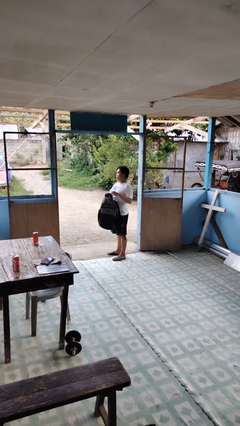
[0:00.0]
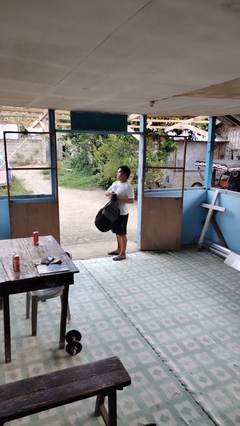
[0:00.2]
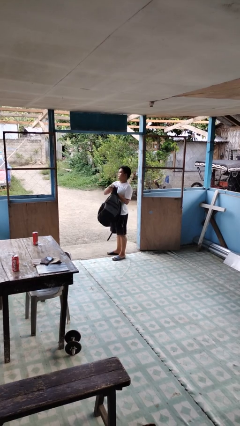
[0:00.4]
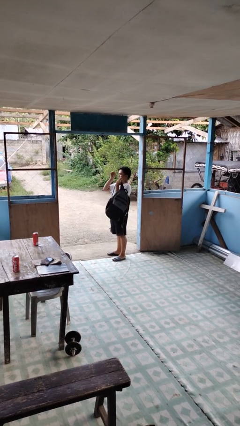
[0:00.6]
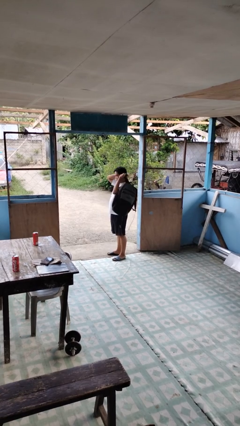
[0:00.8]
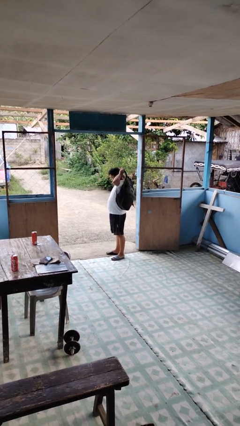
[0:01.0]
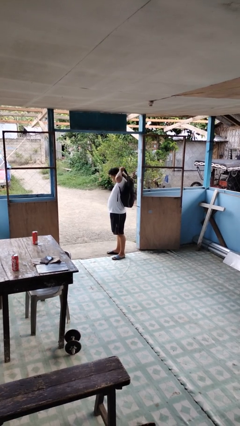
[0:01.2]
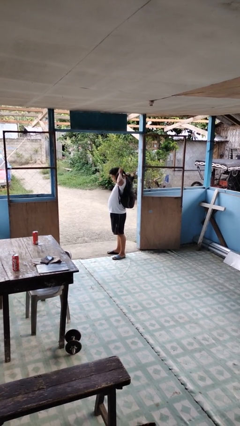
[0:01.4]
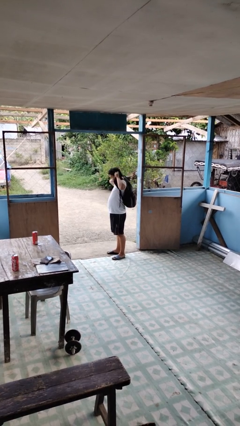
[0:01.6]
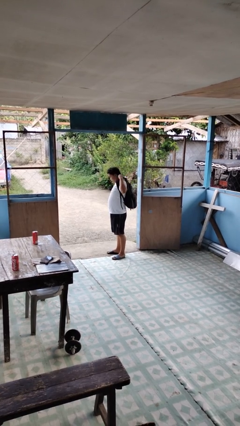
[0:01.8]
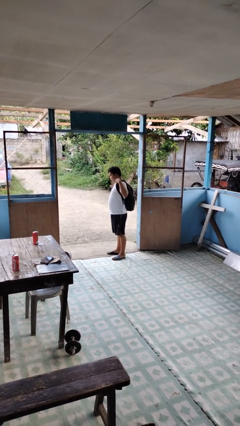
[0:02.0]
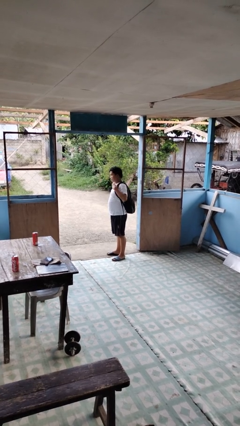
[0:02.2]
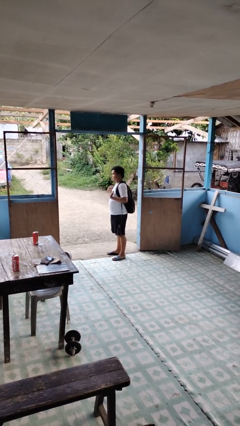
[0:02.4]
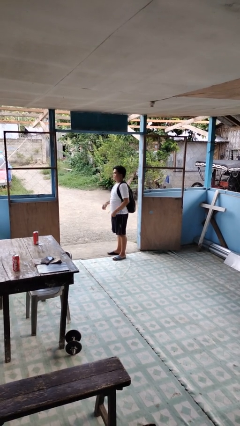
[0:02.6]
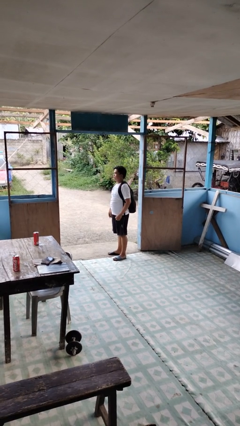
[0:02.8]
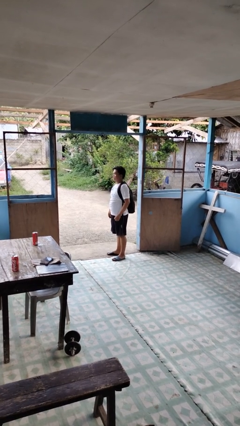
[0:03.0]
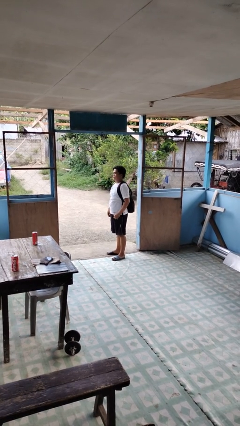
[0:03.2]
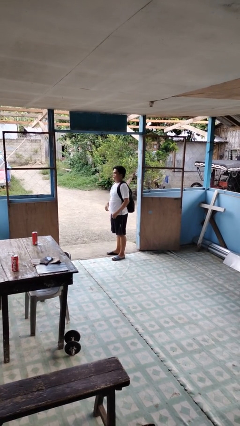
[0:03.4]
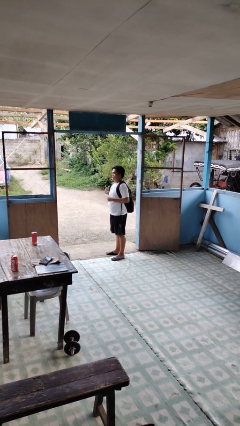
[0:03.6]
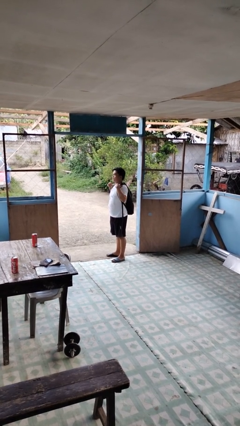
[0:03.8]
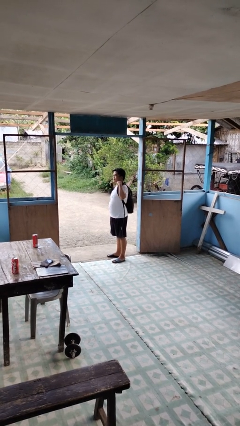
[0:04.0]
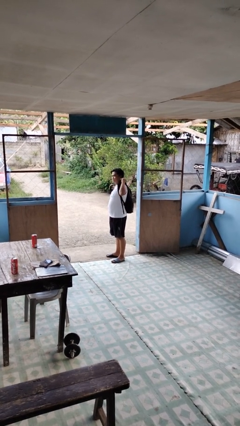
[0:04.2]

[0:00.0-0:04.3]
person puts on backpack

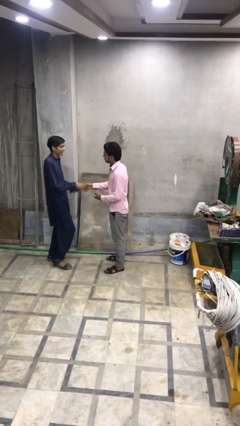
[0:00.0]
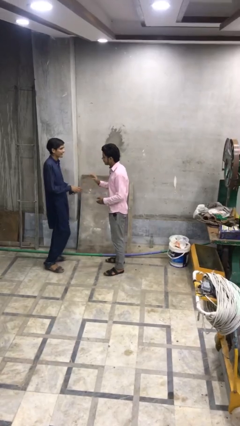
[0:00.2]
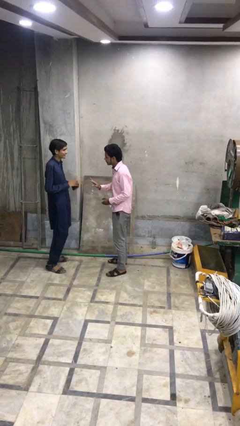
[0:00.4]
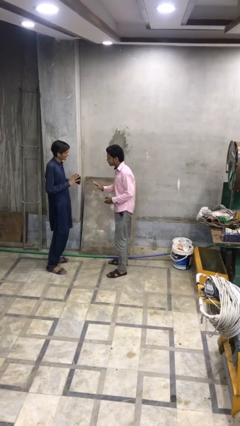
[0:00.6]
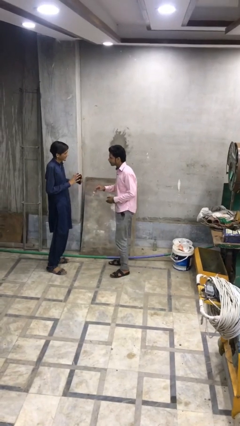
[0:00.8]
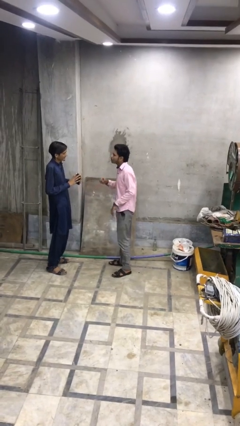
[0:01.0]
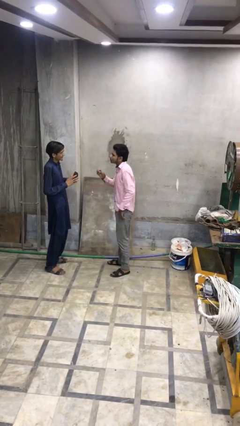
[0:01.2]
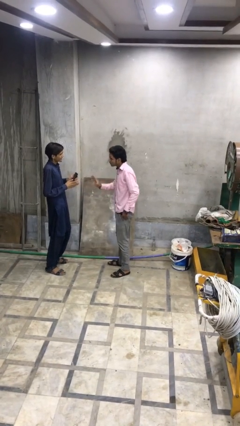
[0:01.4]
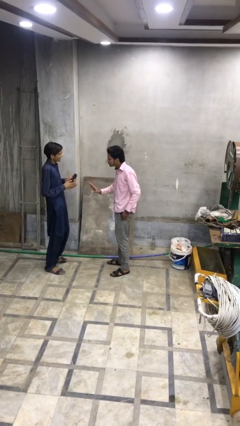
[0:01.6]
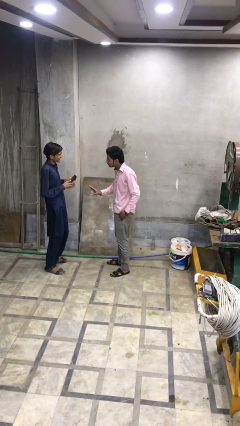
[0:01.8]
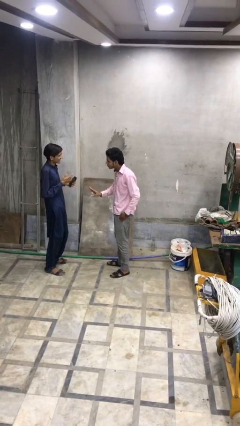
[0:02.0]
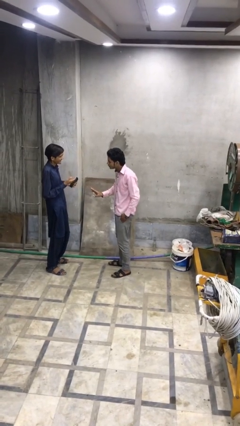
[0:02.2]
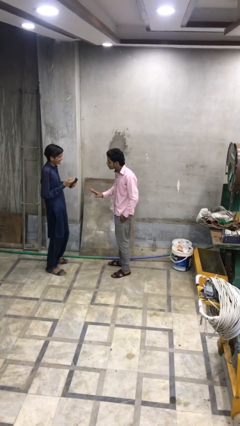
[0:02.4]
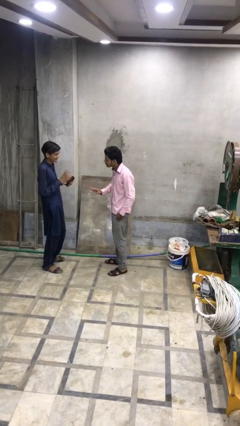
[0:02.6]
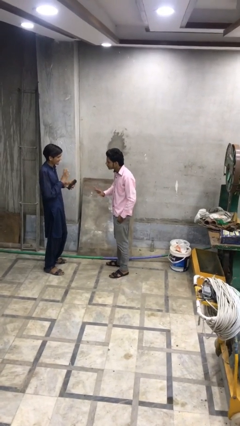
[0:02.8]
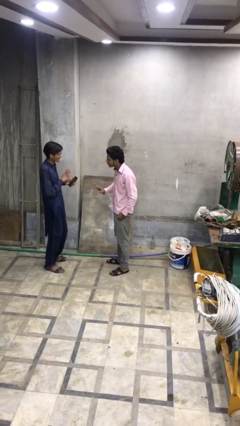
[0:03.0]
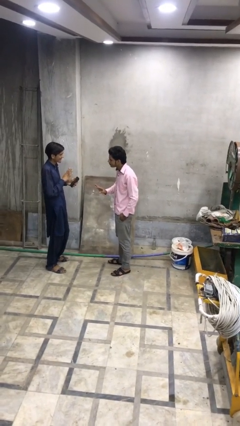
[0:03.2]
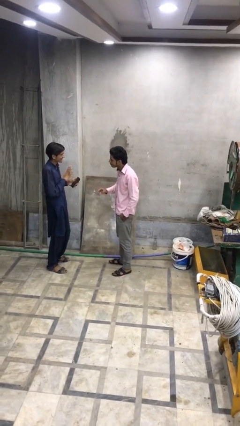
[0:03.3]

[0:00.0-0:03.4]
person talks to person

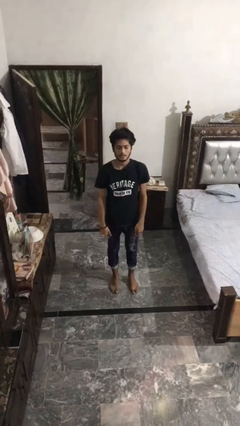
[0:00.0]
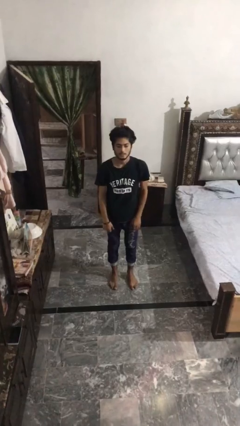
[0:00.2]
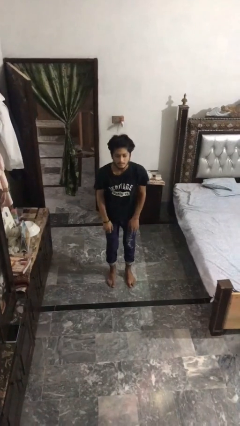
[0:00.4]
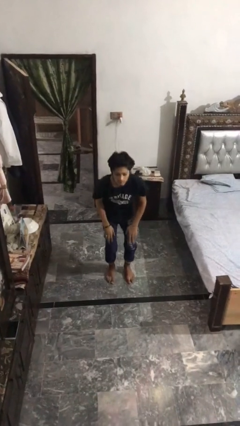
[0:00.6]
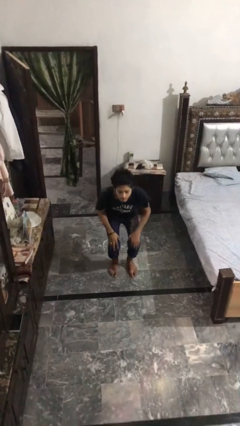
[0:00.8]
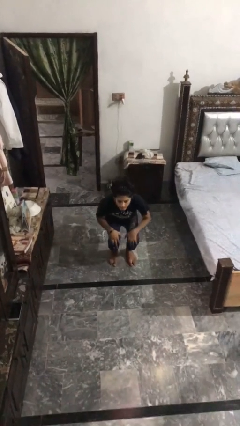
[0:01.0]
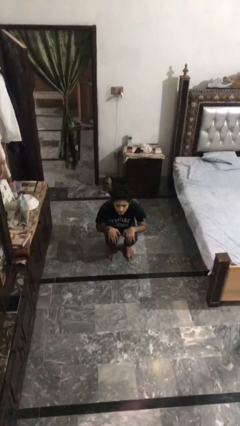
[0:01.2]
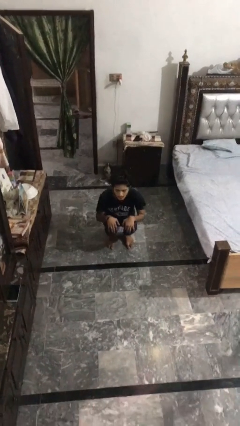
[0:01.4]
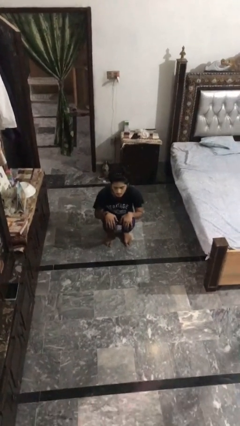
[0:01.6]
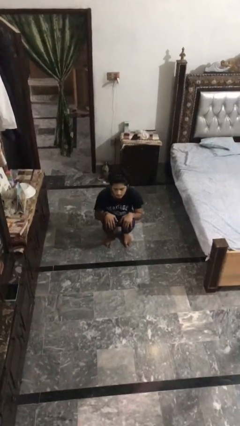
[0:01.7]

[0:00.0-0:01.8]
person squats

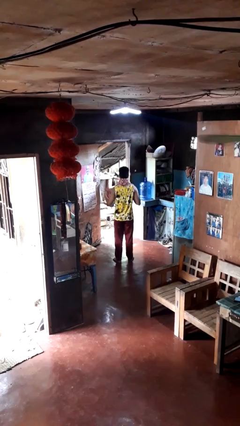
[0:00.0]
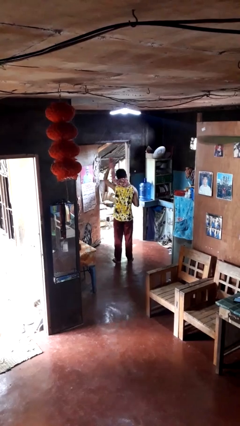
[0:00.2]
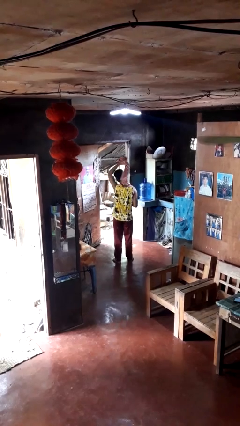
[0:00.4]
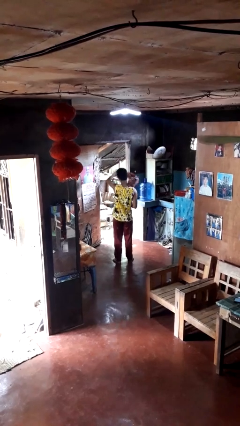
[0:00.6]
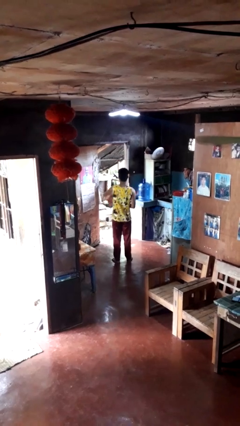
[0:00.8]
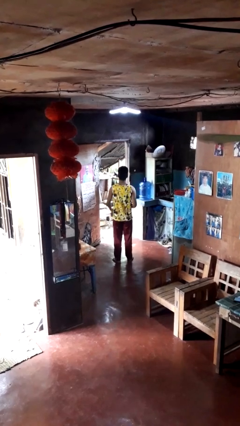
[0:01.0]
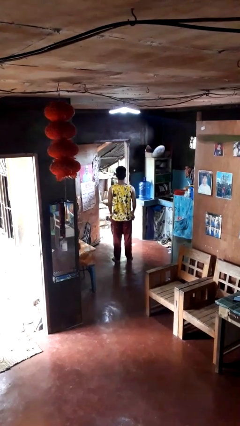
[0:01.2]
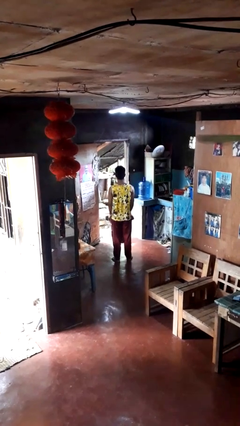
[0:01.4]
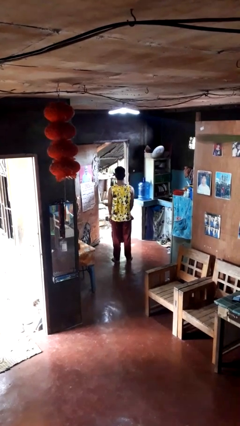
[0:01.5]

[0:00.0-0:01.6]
person takes off scarf

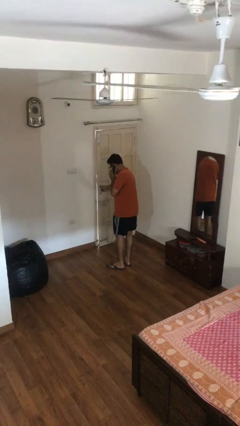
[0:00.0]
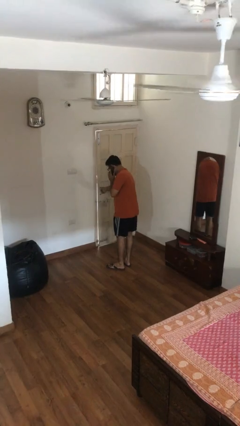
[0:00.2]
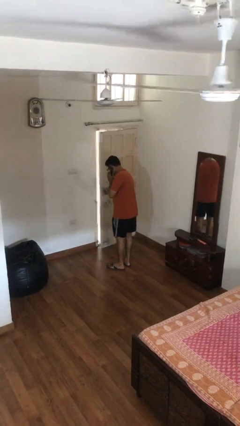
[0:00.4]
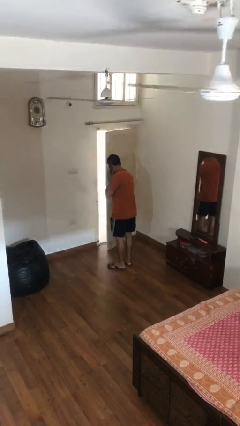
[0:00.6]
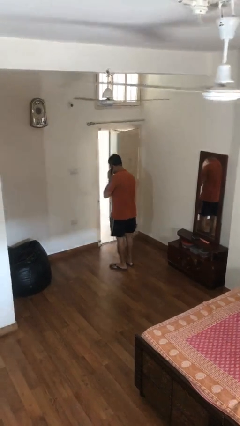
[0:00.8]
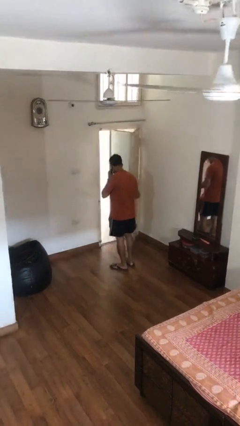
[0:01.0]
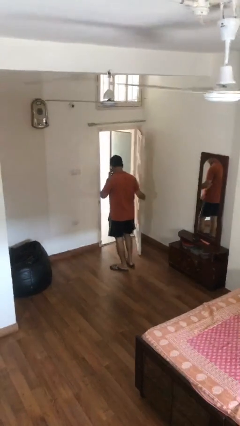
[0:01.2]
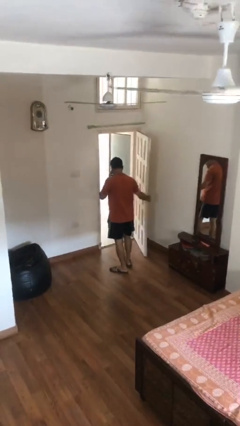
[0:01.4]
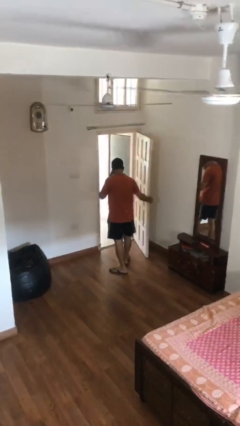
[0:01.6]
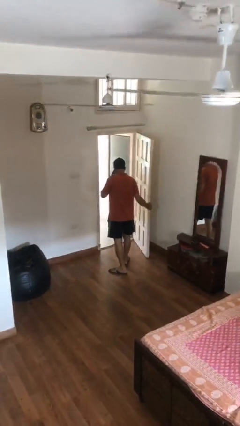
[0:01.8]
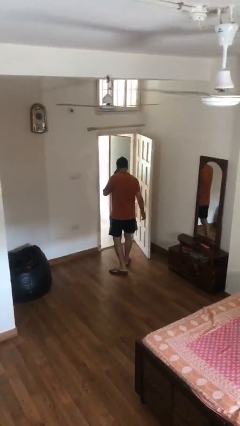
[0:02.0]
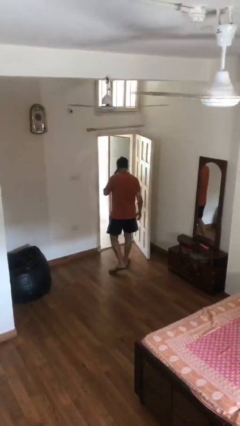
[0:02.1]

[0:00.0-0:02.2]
person opens facility door

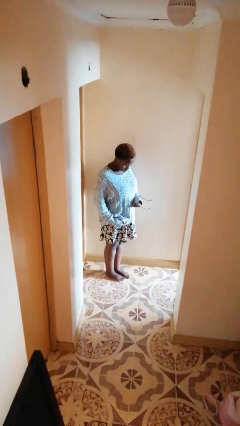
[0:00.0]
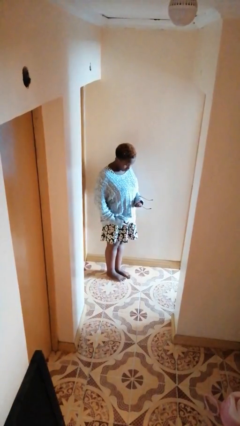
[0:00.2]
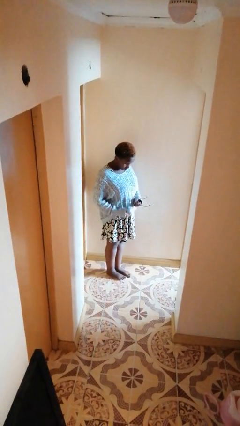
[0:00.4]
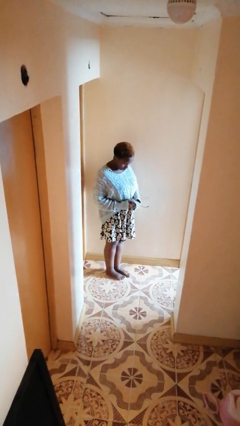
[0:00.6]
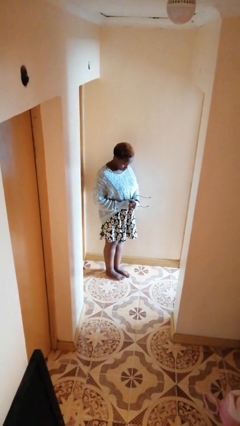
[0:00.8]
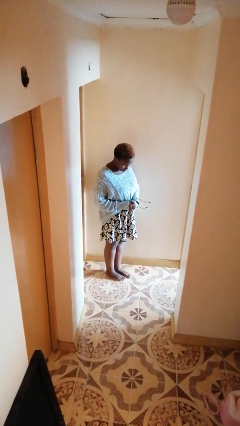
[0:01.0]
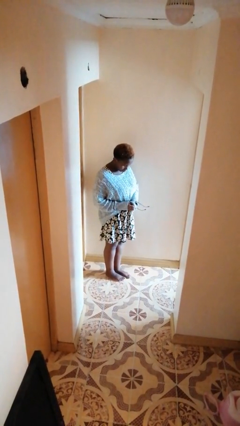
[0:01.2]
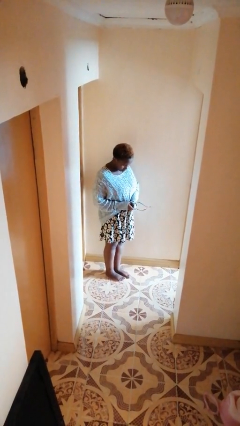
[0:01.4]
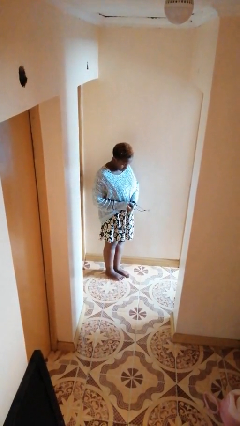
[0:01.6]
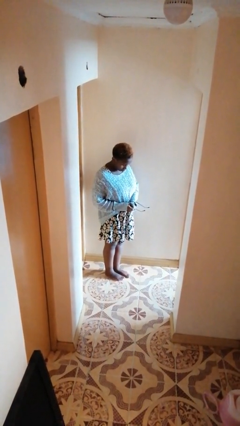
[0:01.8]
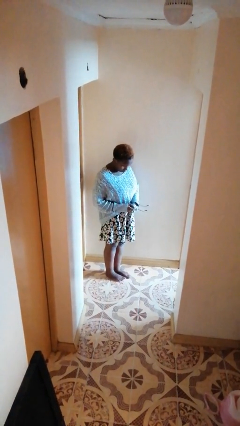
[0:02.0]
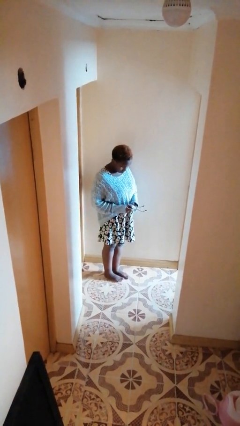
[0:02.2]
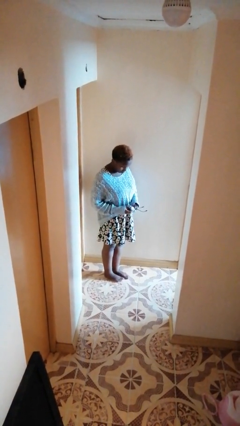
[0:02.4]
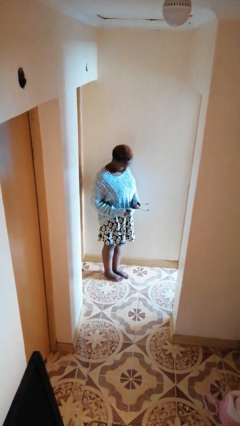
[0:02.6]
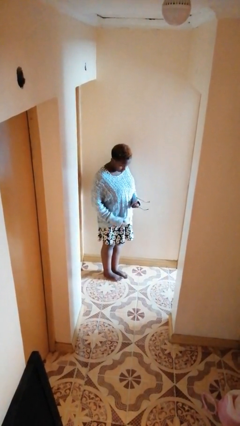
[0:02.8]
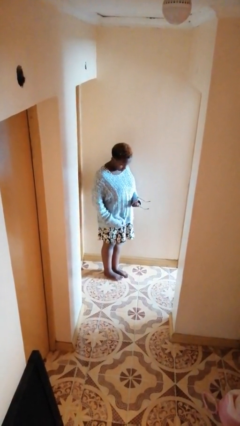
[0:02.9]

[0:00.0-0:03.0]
person cleans eyeglasses

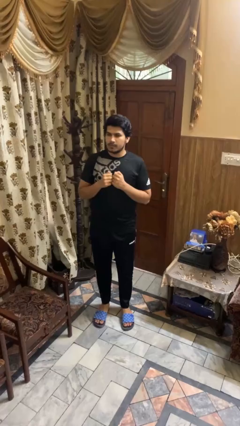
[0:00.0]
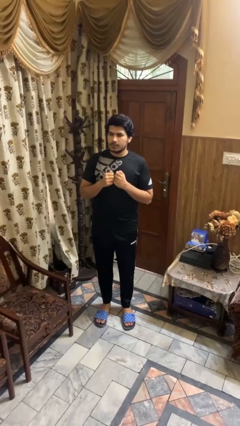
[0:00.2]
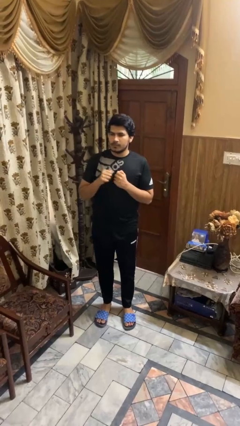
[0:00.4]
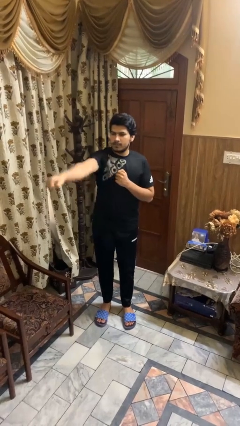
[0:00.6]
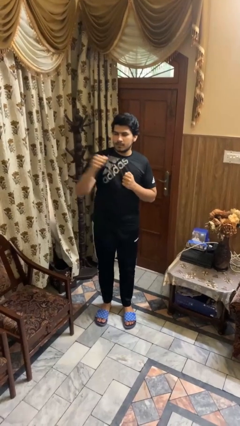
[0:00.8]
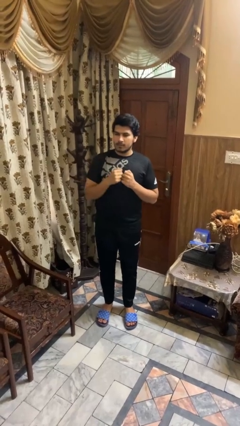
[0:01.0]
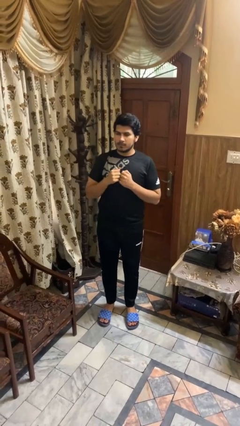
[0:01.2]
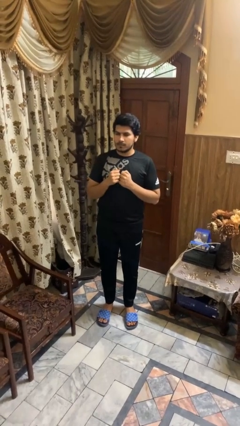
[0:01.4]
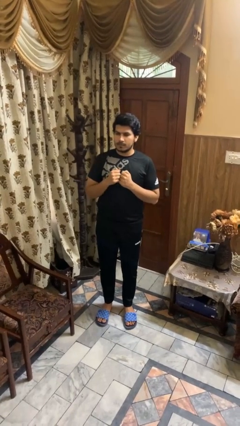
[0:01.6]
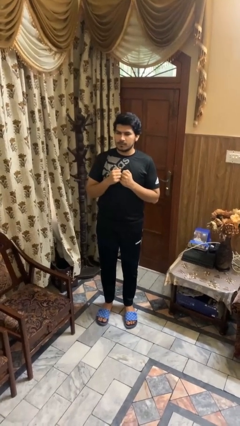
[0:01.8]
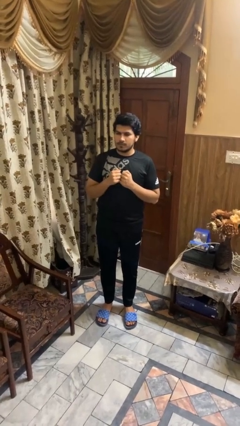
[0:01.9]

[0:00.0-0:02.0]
person karate chop
